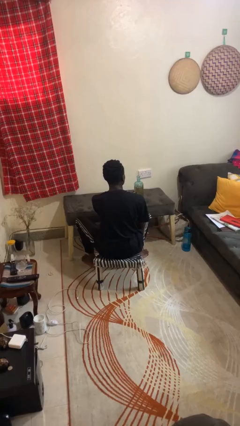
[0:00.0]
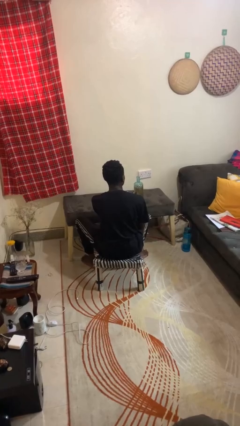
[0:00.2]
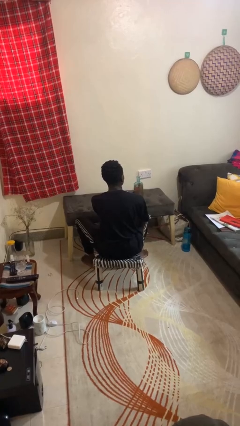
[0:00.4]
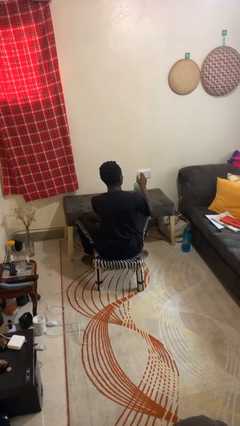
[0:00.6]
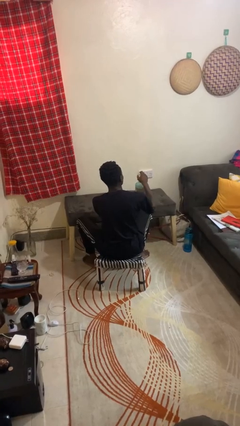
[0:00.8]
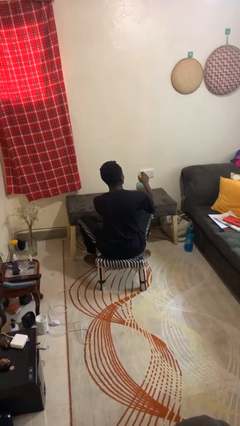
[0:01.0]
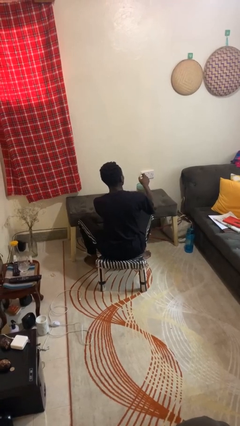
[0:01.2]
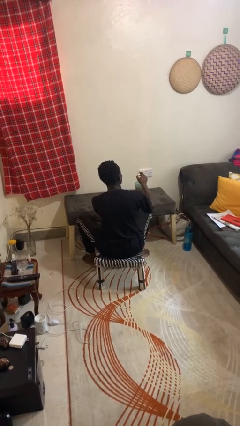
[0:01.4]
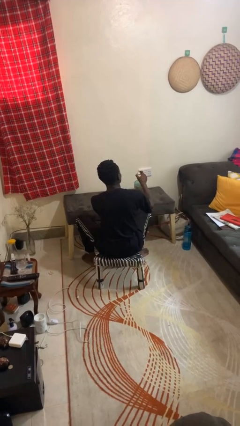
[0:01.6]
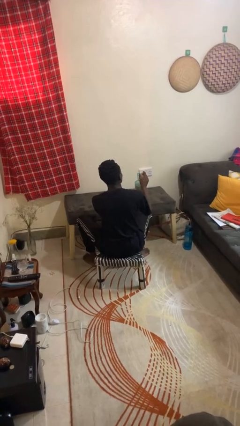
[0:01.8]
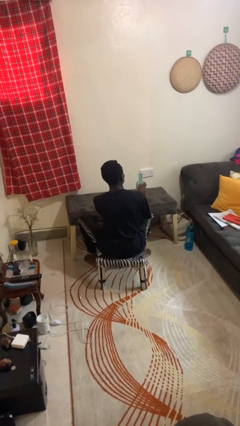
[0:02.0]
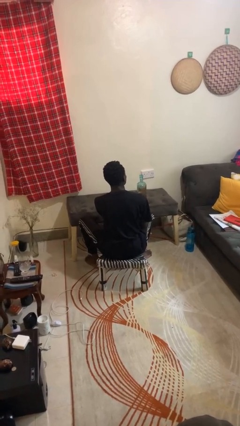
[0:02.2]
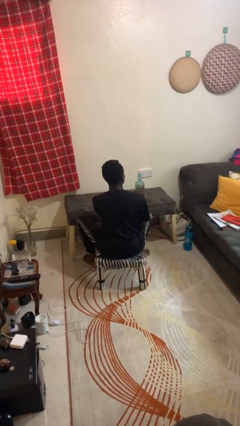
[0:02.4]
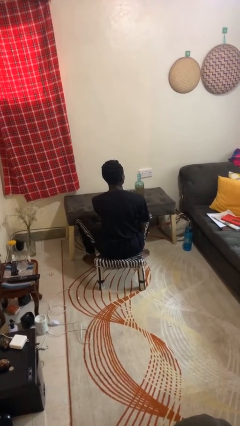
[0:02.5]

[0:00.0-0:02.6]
person closes jar

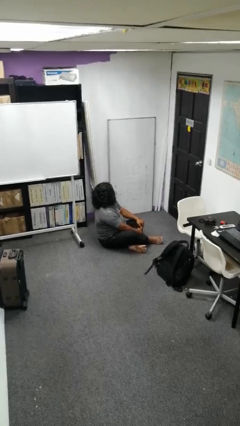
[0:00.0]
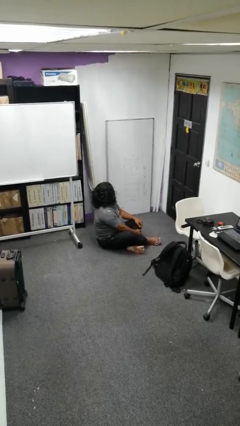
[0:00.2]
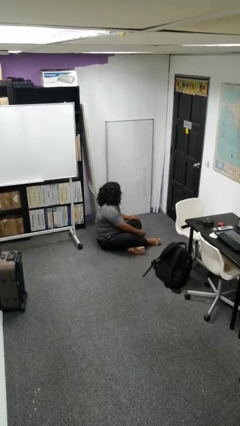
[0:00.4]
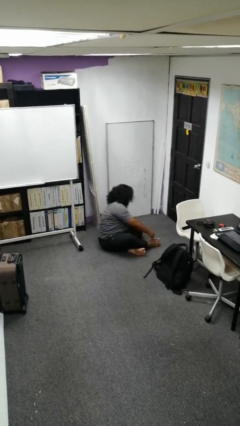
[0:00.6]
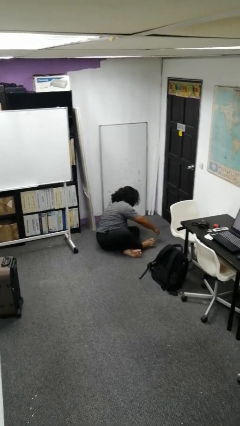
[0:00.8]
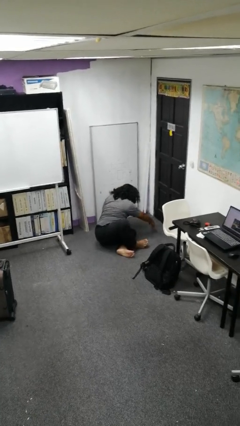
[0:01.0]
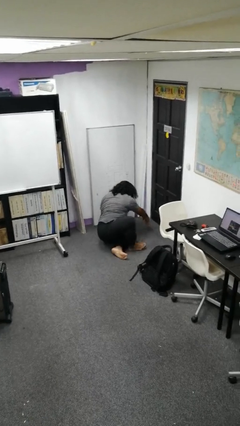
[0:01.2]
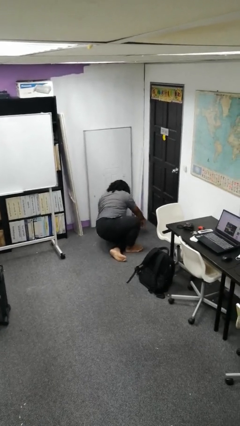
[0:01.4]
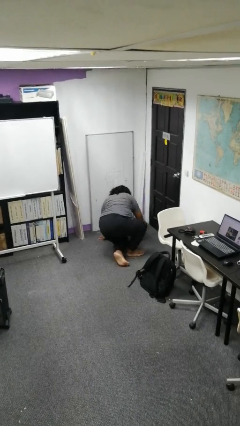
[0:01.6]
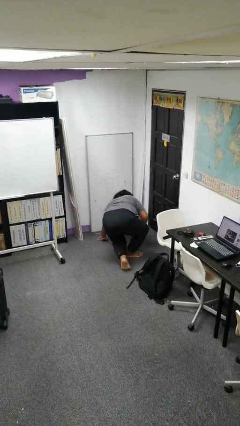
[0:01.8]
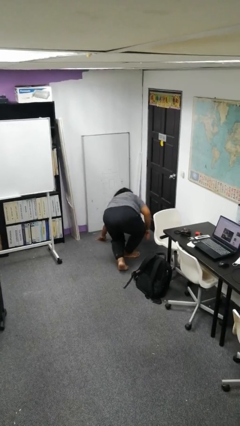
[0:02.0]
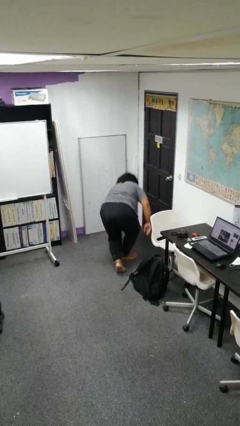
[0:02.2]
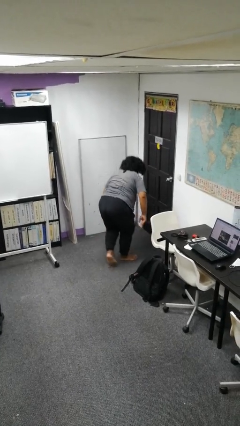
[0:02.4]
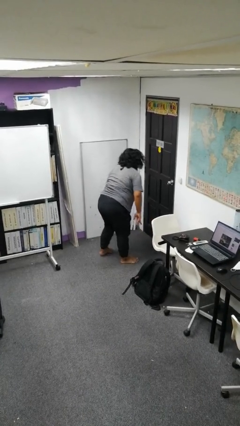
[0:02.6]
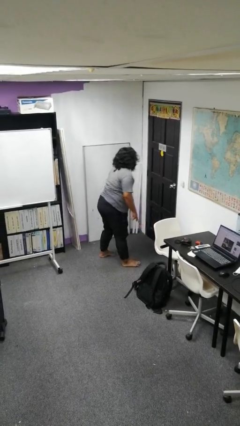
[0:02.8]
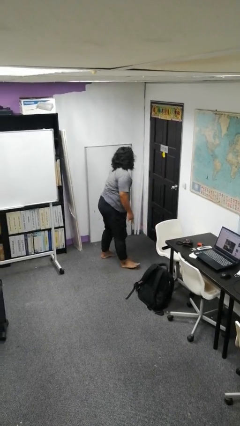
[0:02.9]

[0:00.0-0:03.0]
person stands up from floor

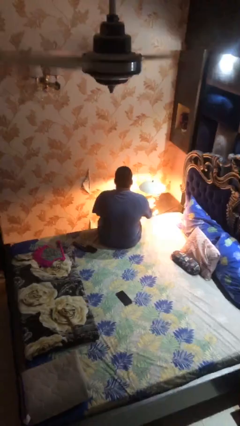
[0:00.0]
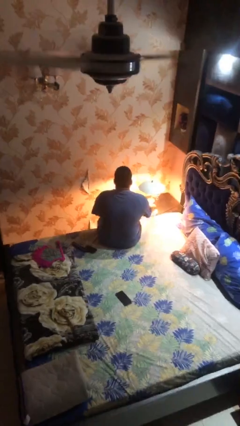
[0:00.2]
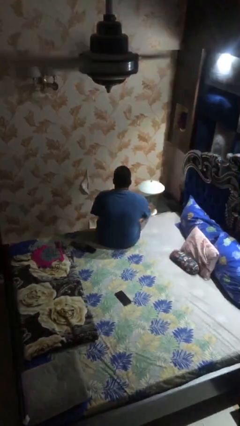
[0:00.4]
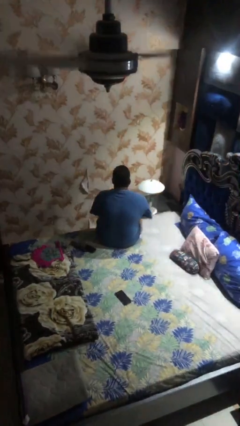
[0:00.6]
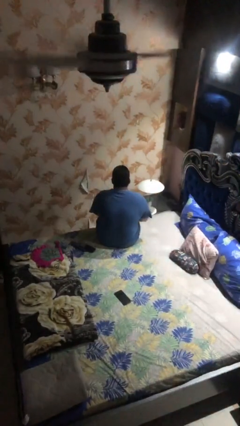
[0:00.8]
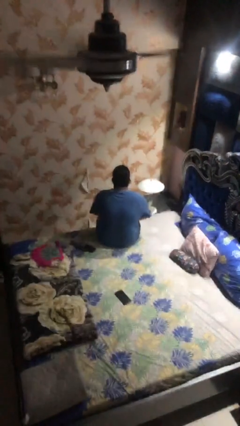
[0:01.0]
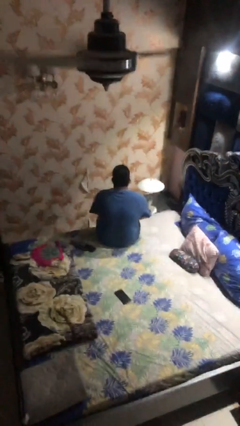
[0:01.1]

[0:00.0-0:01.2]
person turns off lamp

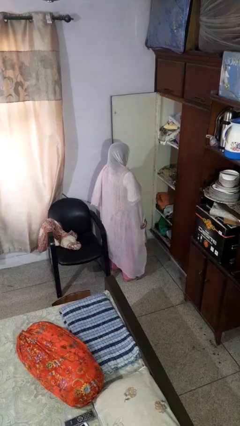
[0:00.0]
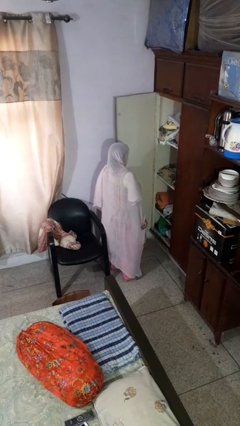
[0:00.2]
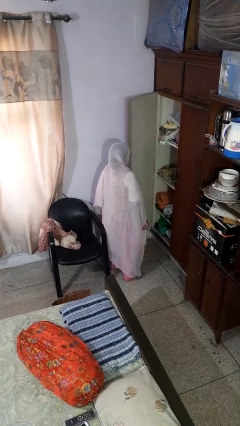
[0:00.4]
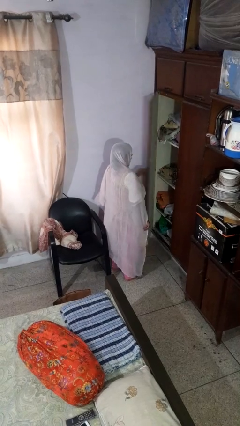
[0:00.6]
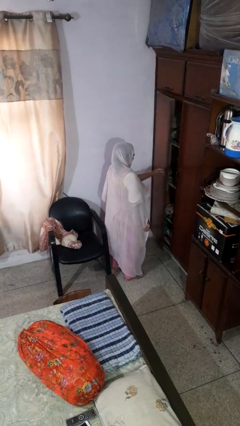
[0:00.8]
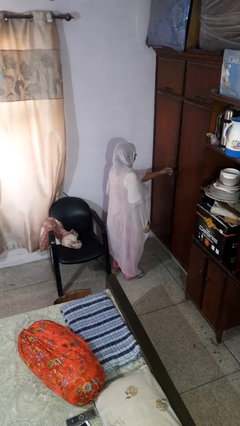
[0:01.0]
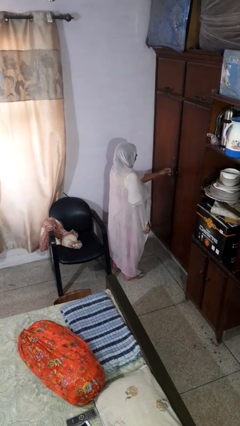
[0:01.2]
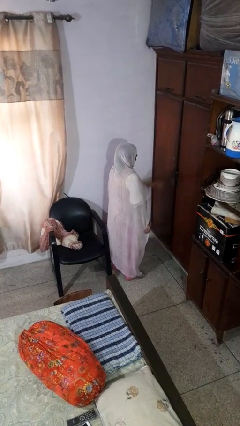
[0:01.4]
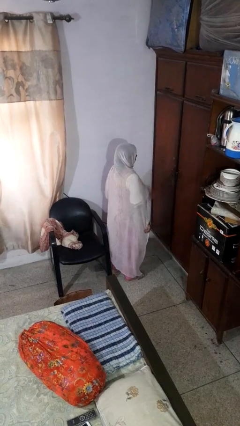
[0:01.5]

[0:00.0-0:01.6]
person closes closet door

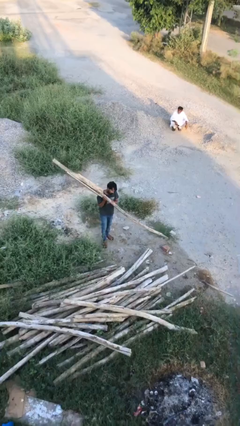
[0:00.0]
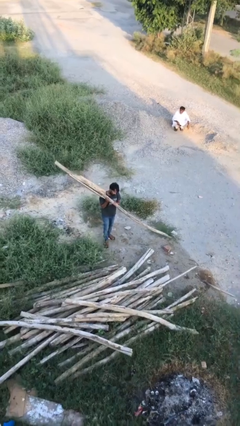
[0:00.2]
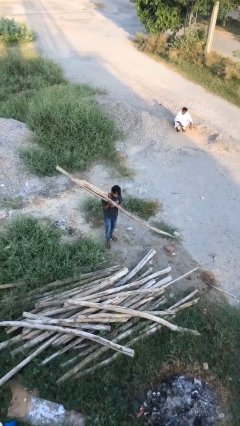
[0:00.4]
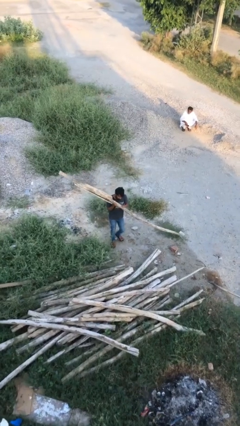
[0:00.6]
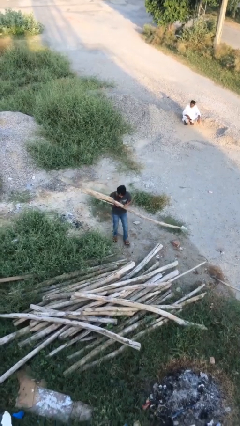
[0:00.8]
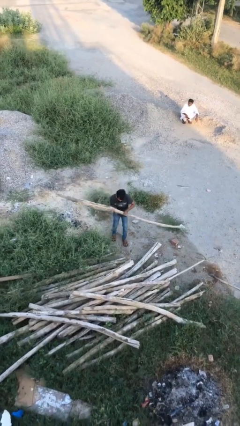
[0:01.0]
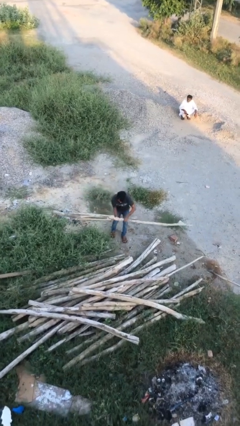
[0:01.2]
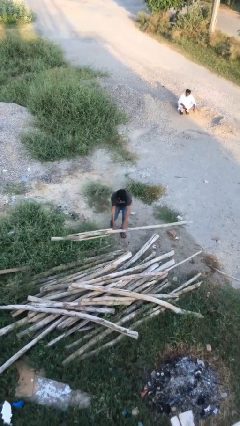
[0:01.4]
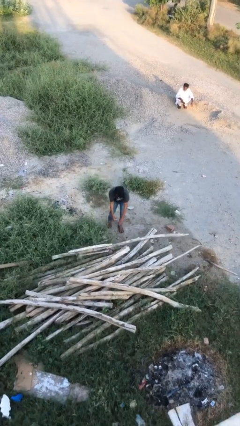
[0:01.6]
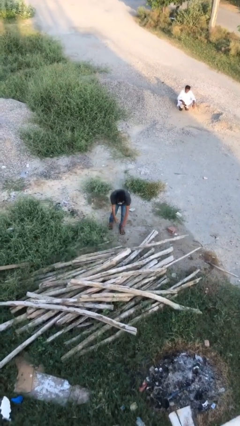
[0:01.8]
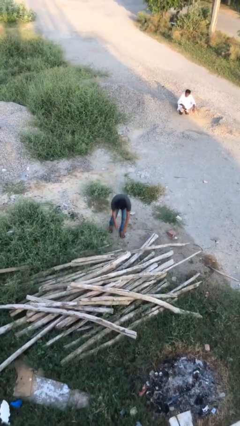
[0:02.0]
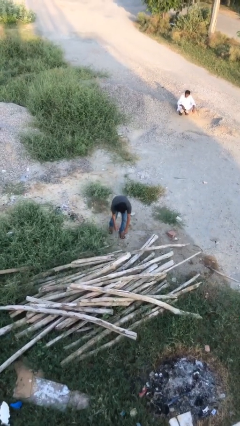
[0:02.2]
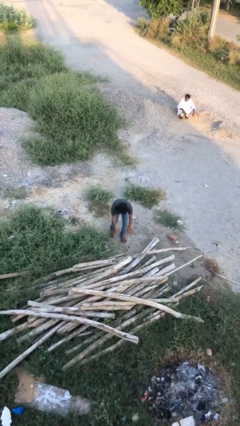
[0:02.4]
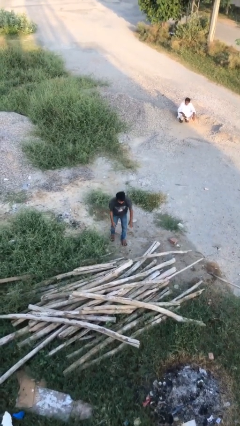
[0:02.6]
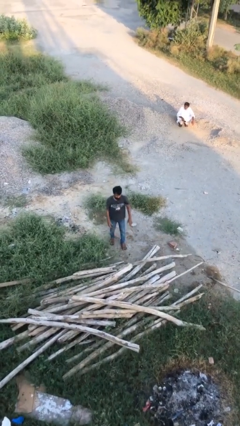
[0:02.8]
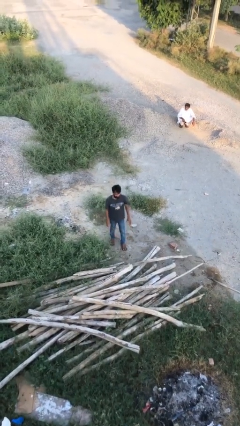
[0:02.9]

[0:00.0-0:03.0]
person puts down object on floor

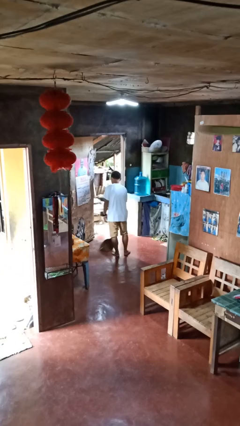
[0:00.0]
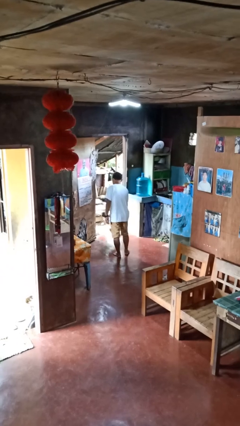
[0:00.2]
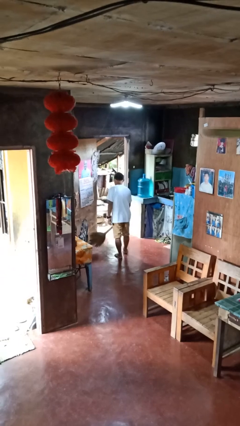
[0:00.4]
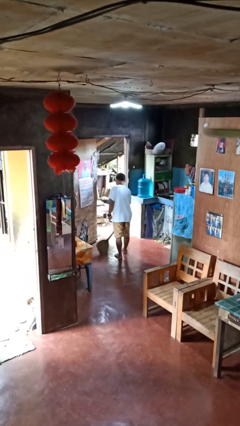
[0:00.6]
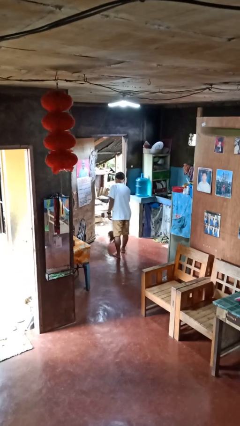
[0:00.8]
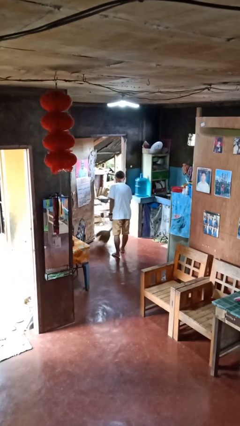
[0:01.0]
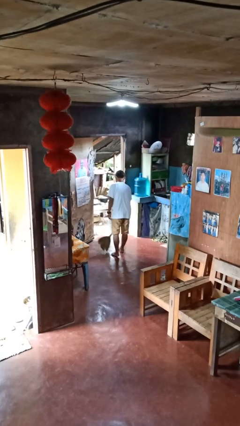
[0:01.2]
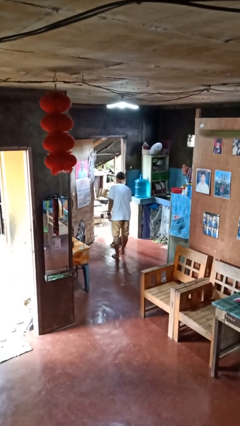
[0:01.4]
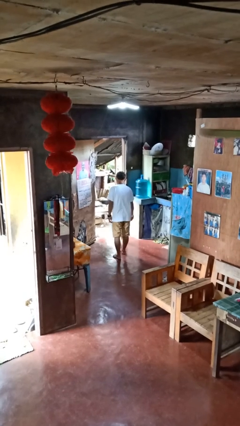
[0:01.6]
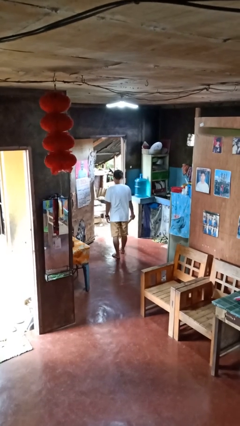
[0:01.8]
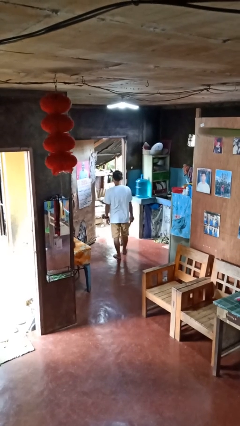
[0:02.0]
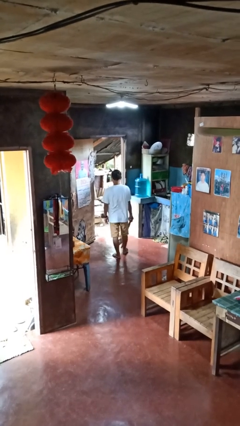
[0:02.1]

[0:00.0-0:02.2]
person sweeps floor

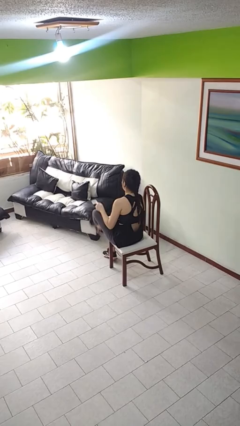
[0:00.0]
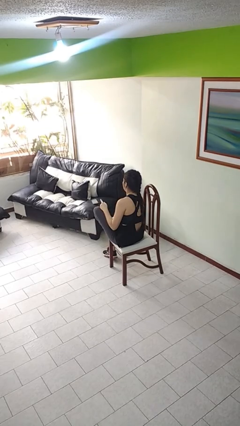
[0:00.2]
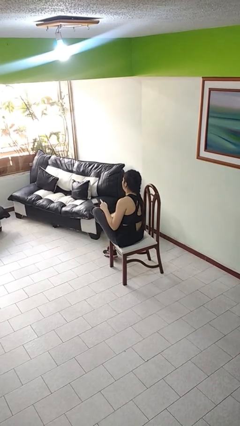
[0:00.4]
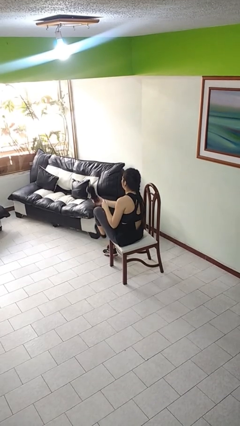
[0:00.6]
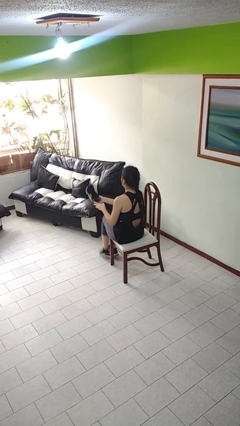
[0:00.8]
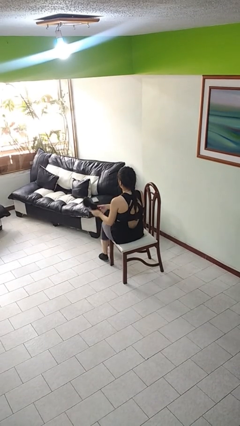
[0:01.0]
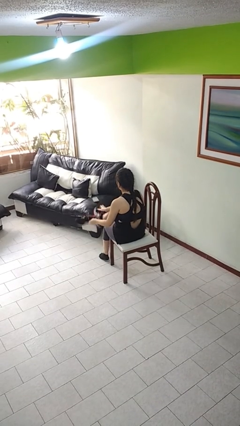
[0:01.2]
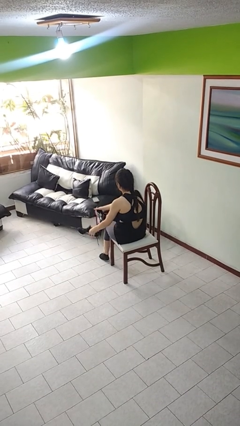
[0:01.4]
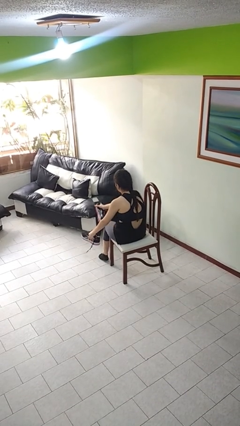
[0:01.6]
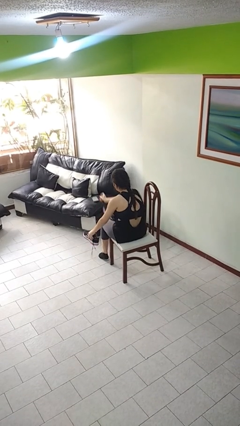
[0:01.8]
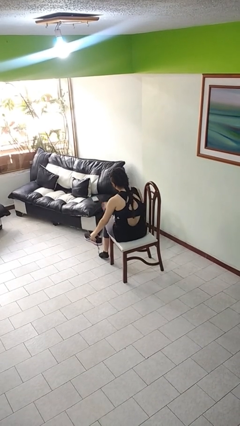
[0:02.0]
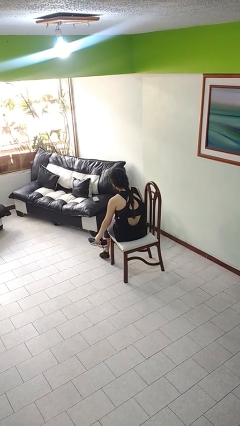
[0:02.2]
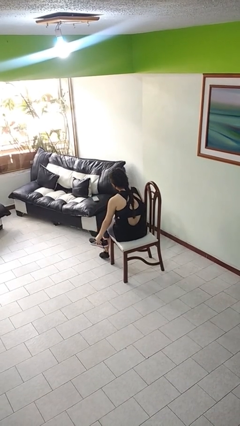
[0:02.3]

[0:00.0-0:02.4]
person takes off shoes

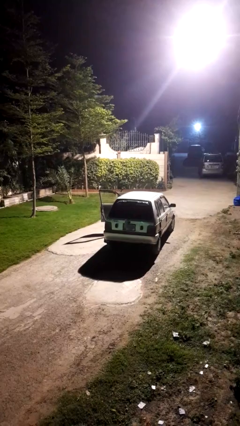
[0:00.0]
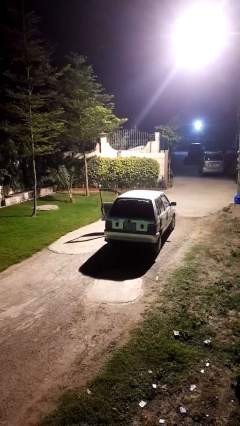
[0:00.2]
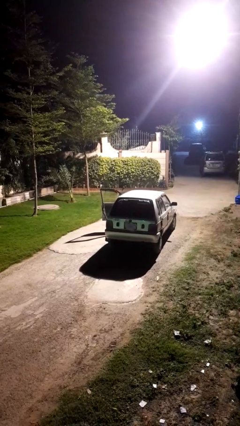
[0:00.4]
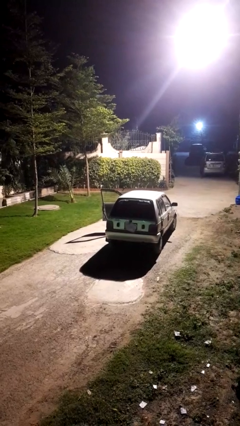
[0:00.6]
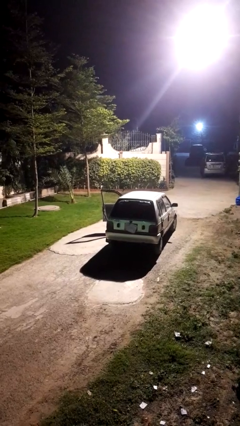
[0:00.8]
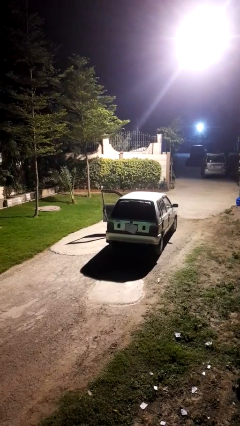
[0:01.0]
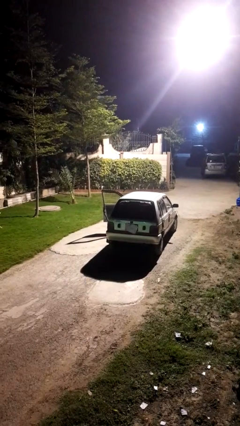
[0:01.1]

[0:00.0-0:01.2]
person enters car
